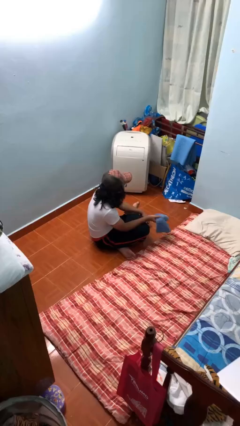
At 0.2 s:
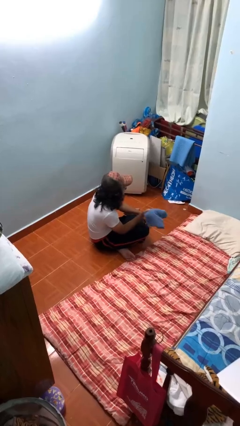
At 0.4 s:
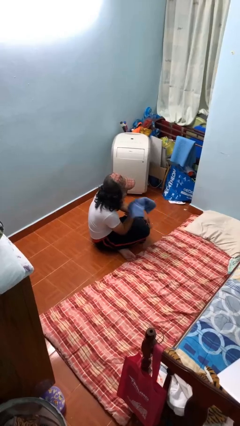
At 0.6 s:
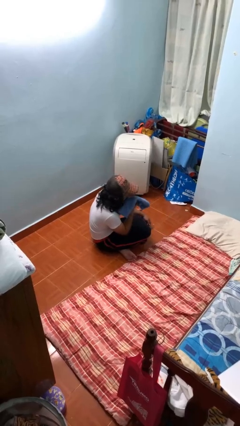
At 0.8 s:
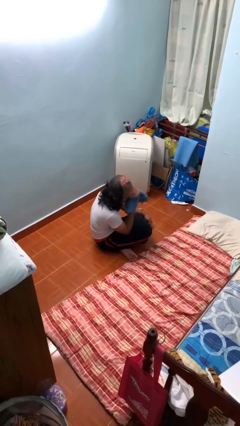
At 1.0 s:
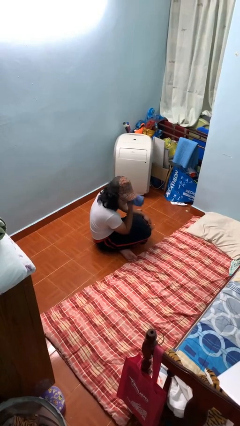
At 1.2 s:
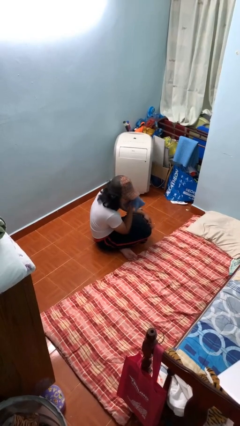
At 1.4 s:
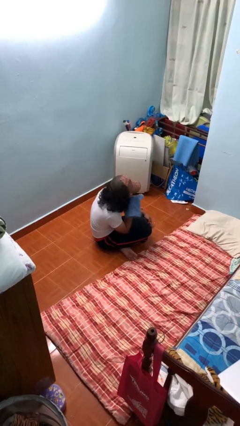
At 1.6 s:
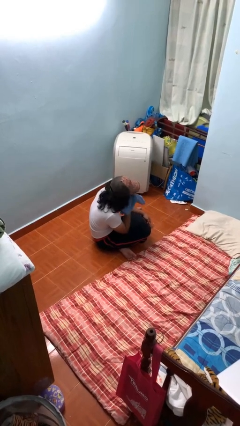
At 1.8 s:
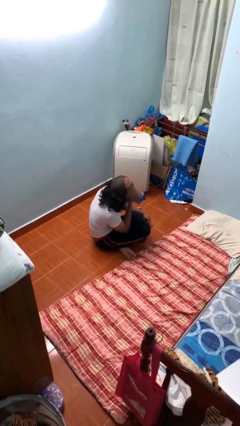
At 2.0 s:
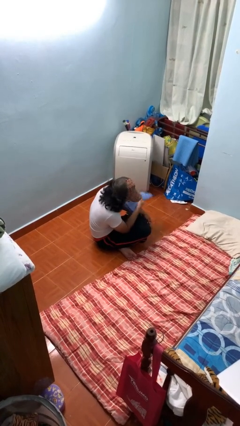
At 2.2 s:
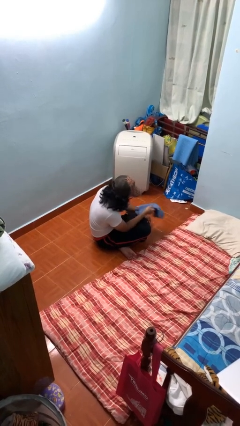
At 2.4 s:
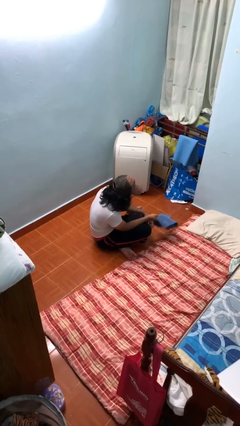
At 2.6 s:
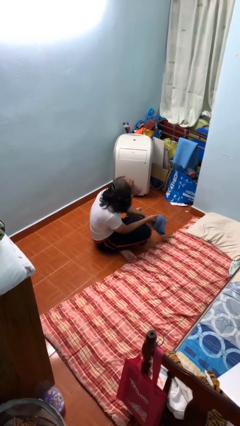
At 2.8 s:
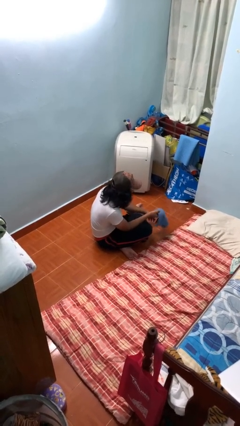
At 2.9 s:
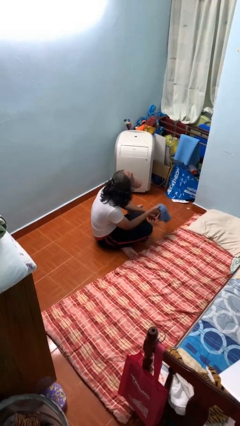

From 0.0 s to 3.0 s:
person wipes mouth with napkin

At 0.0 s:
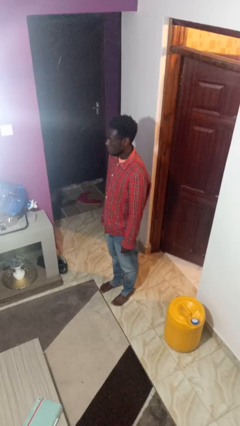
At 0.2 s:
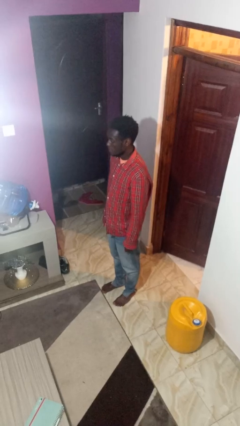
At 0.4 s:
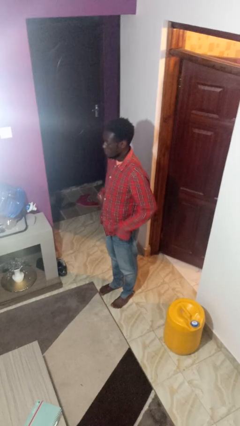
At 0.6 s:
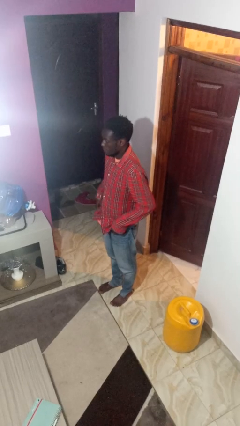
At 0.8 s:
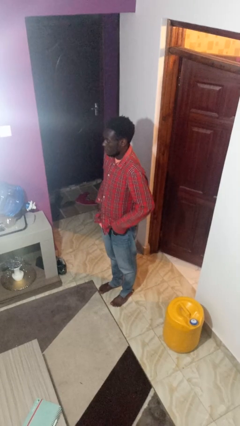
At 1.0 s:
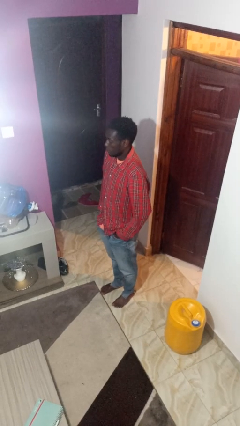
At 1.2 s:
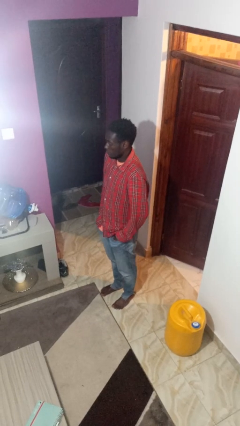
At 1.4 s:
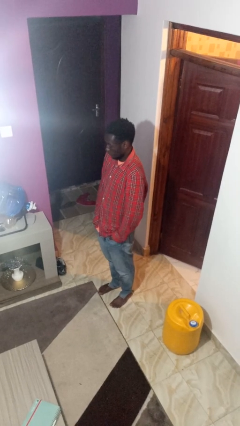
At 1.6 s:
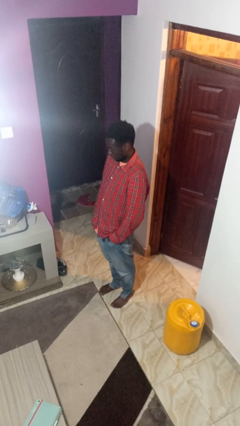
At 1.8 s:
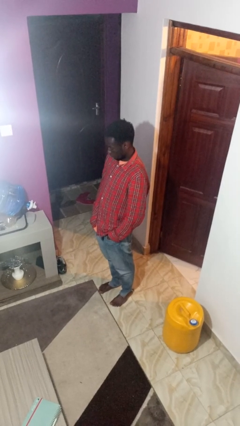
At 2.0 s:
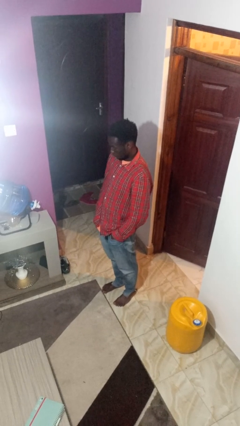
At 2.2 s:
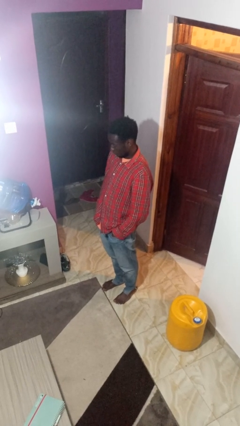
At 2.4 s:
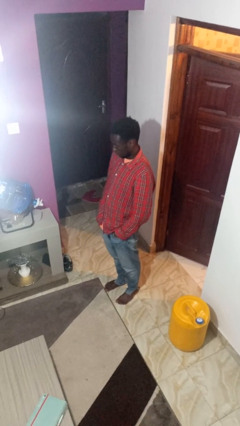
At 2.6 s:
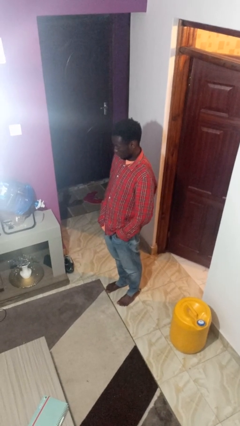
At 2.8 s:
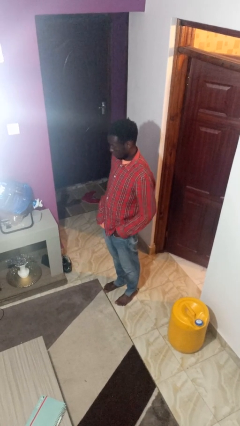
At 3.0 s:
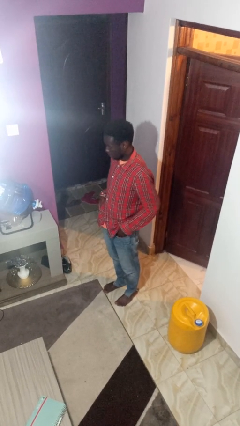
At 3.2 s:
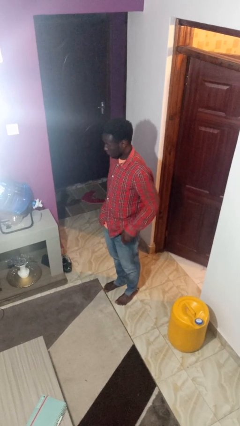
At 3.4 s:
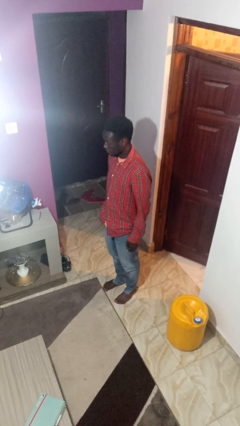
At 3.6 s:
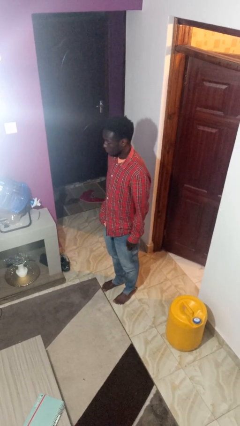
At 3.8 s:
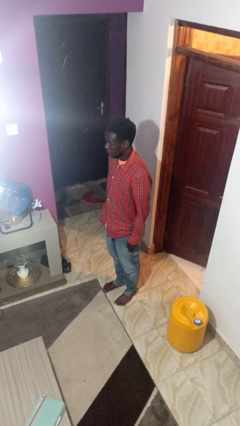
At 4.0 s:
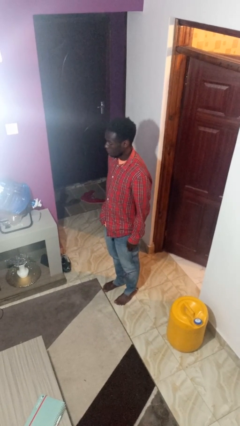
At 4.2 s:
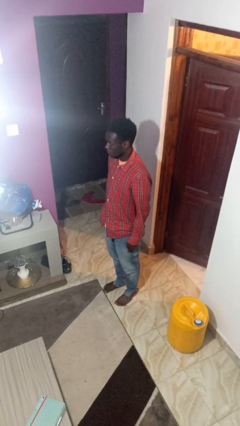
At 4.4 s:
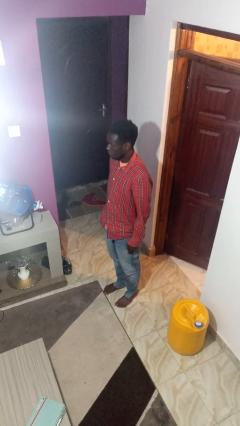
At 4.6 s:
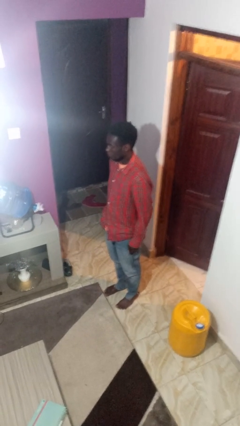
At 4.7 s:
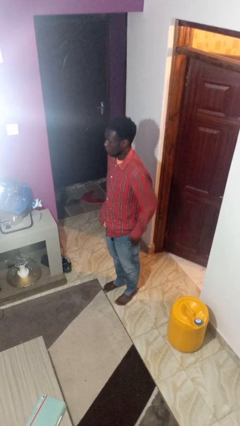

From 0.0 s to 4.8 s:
person puts hands in back pockets

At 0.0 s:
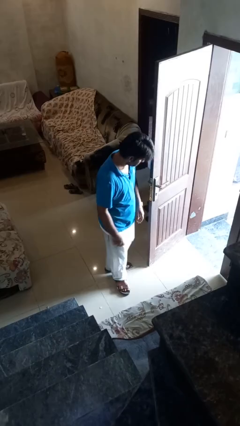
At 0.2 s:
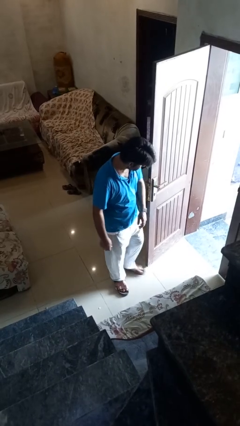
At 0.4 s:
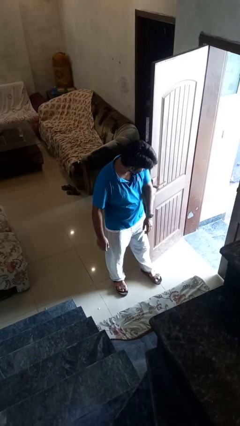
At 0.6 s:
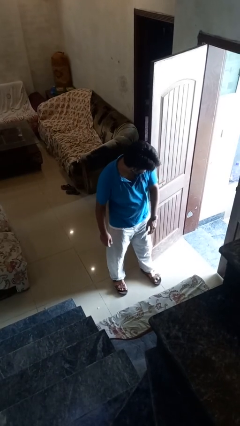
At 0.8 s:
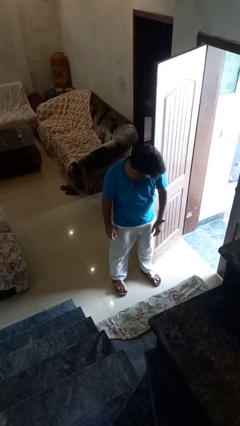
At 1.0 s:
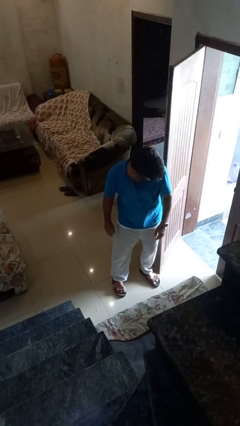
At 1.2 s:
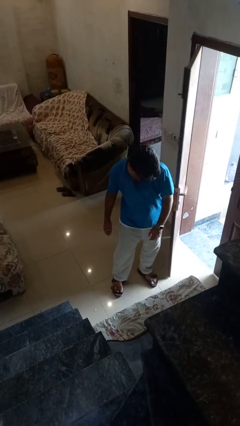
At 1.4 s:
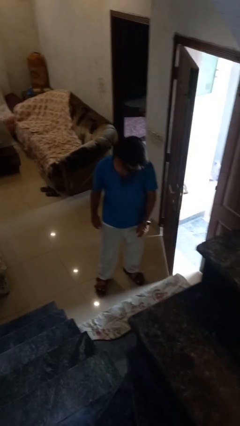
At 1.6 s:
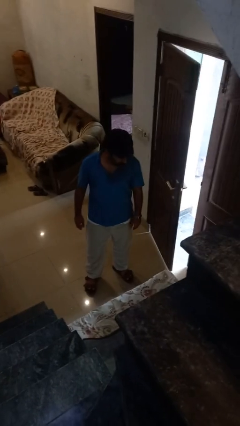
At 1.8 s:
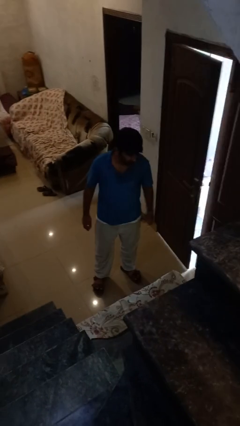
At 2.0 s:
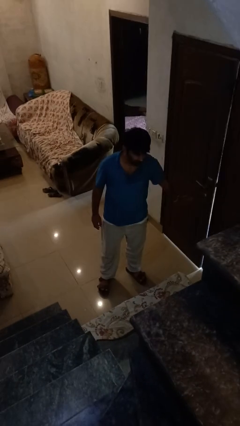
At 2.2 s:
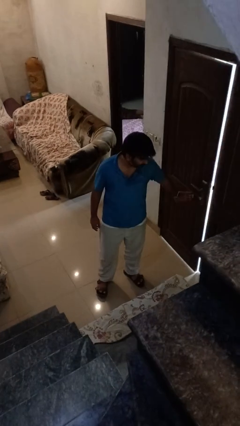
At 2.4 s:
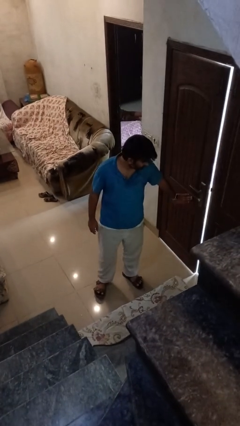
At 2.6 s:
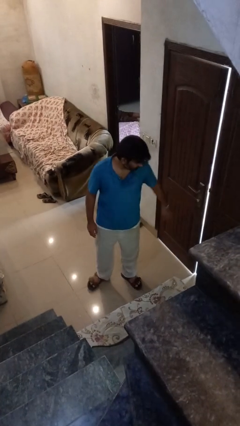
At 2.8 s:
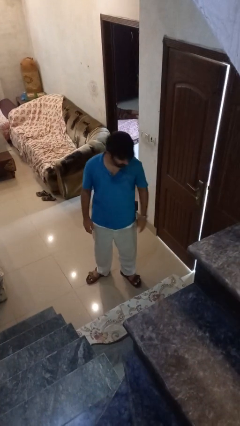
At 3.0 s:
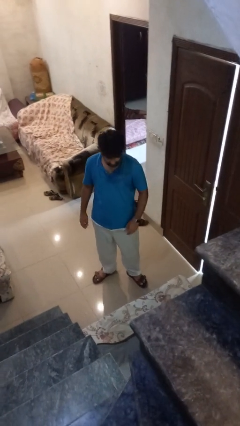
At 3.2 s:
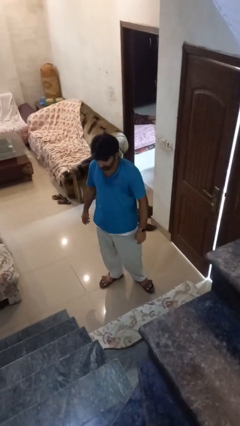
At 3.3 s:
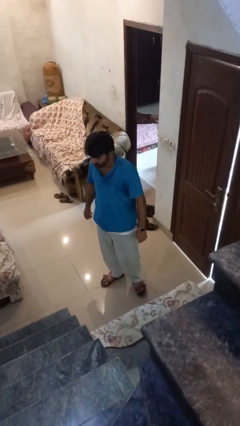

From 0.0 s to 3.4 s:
person closes door with hip

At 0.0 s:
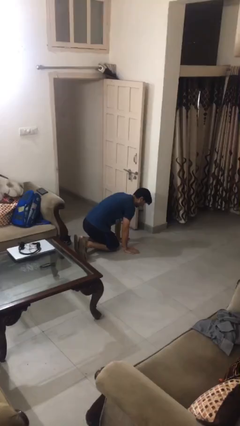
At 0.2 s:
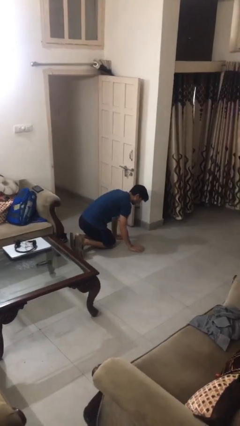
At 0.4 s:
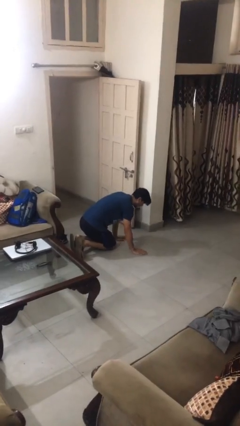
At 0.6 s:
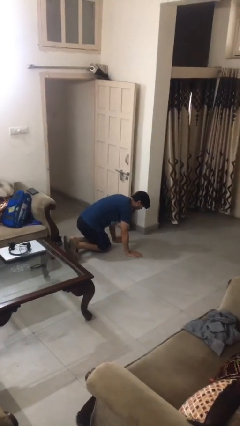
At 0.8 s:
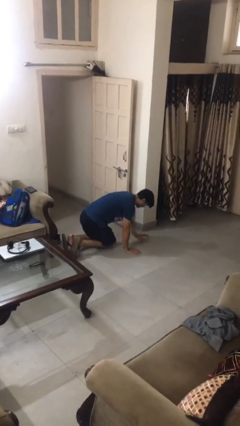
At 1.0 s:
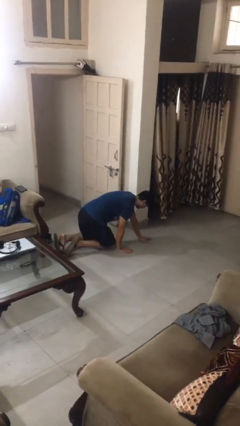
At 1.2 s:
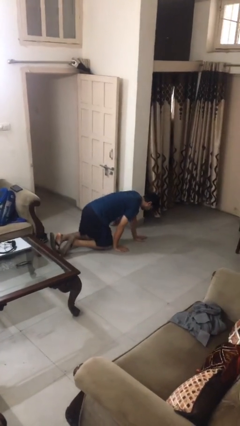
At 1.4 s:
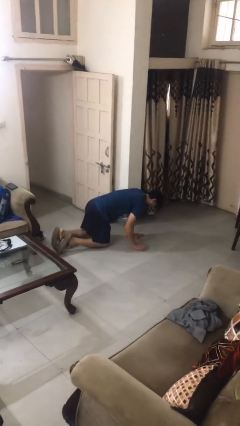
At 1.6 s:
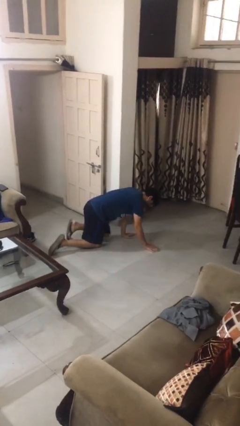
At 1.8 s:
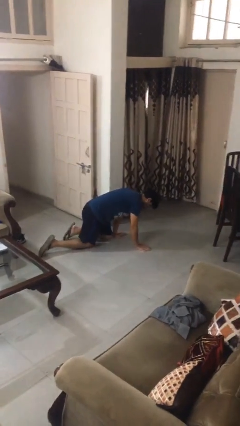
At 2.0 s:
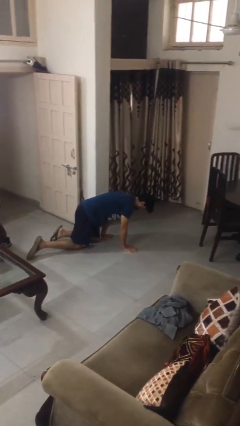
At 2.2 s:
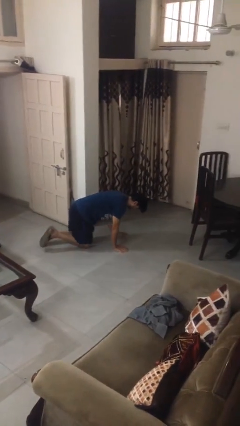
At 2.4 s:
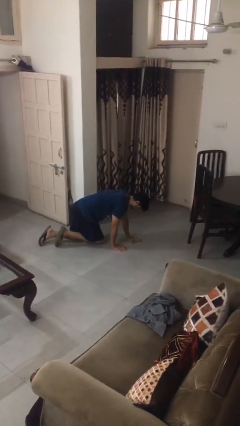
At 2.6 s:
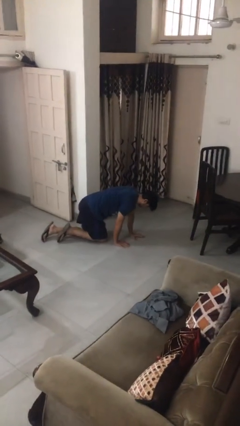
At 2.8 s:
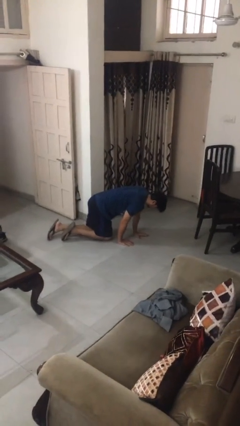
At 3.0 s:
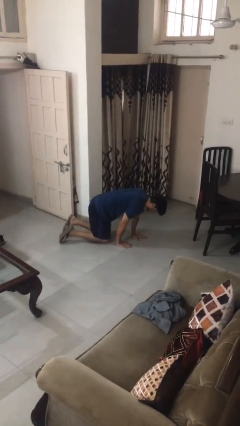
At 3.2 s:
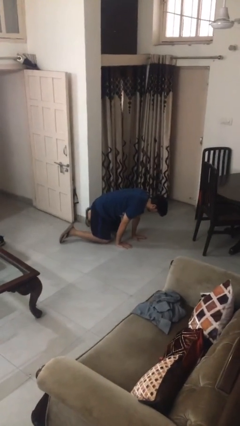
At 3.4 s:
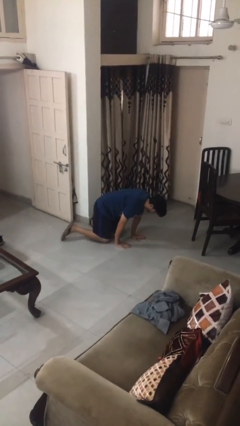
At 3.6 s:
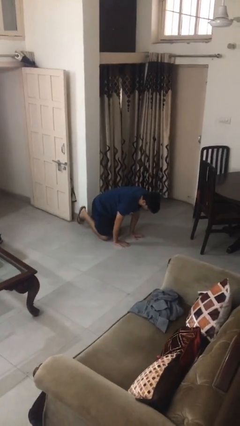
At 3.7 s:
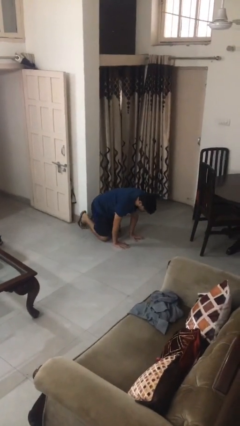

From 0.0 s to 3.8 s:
person crawls

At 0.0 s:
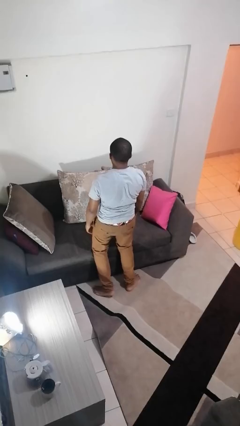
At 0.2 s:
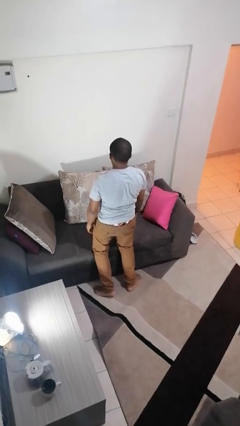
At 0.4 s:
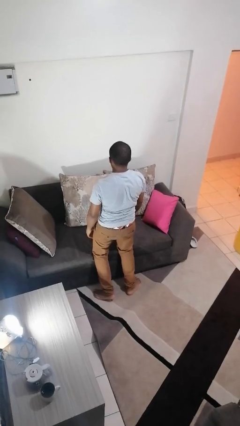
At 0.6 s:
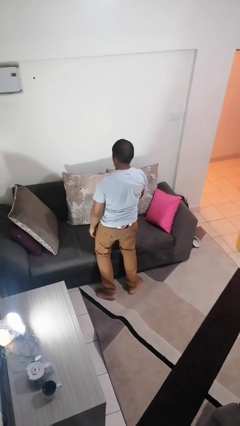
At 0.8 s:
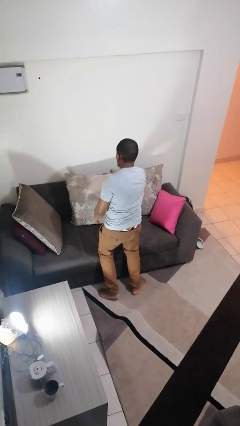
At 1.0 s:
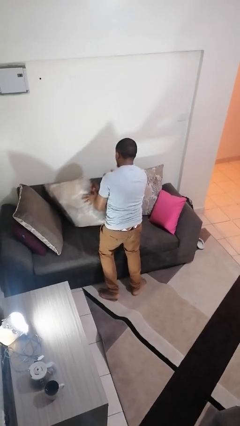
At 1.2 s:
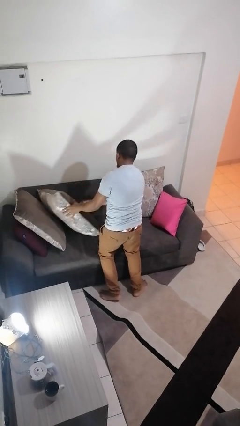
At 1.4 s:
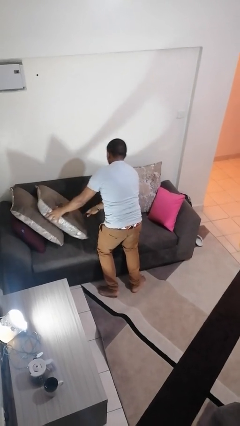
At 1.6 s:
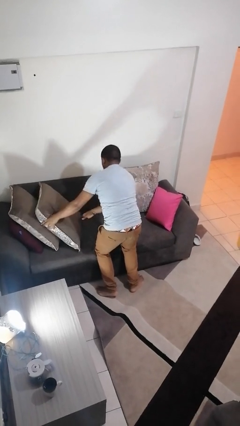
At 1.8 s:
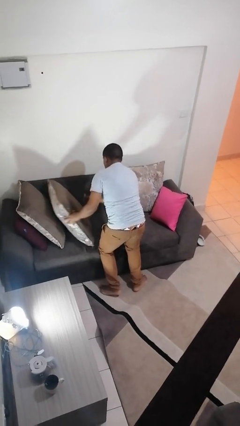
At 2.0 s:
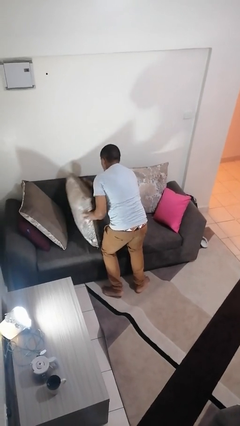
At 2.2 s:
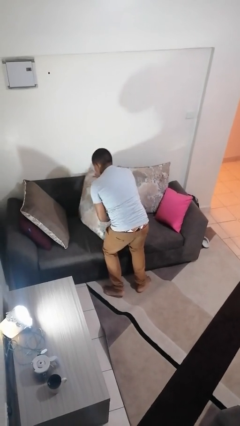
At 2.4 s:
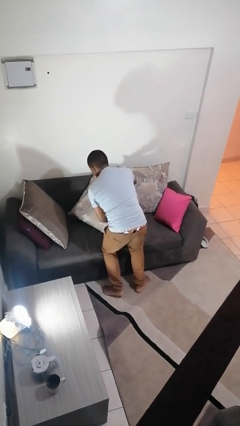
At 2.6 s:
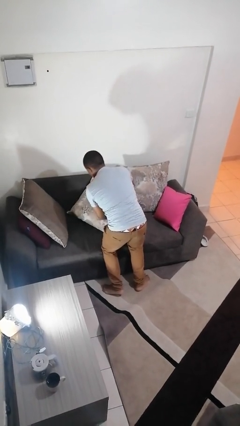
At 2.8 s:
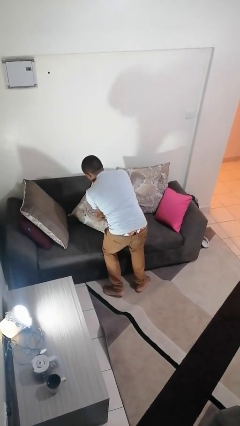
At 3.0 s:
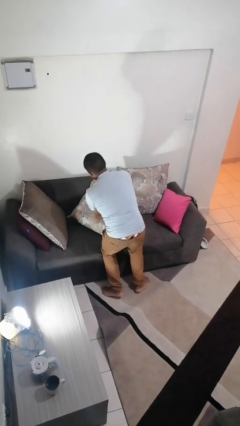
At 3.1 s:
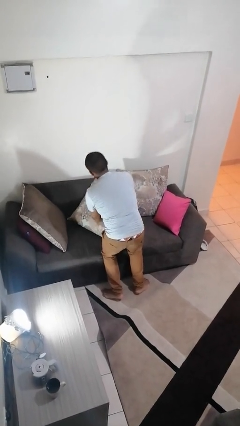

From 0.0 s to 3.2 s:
person searches in couch
